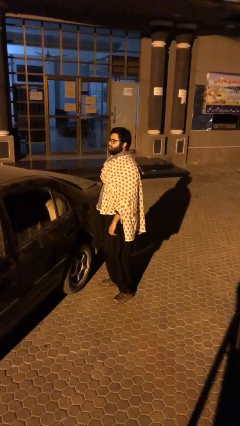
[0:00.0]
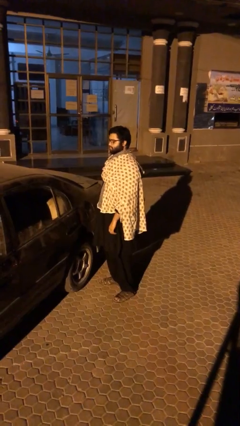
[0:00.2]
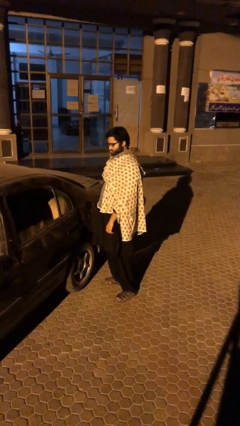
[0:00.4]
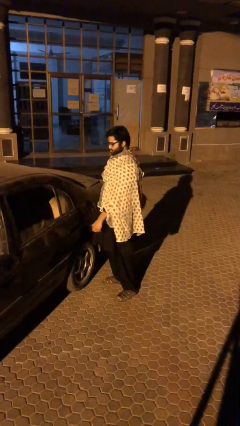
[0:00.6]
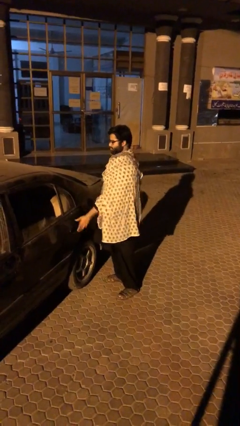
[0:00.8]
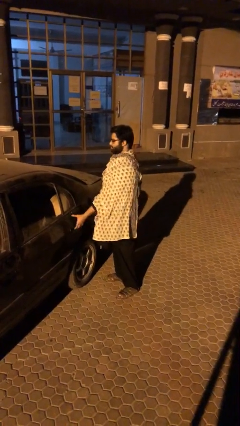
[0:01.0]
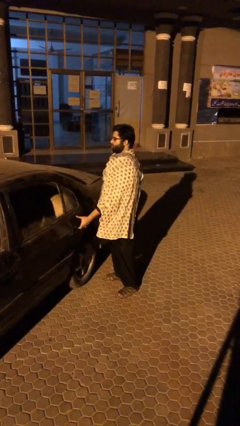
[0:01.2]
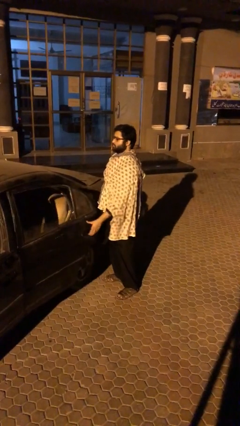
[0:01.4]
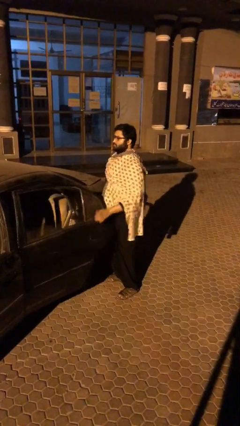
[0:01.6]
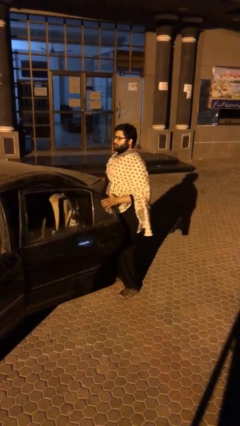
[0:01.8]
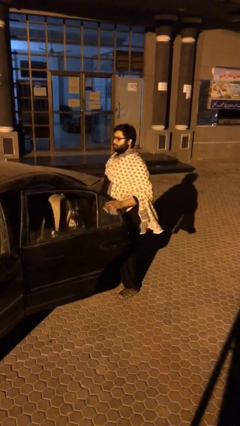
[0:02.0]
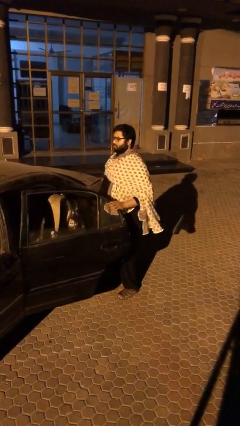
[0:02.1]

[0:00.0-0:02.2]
person opens car door

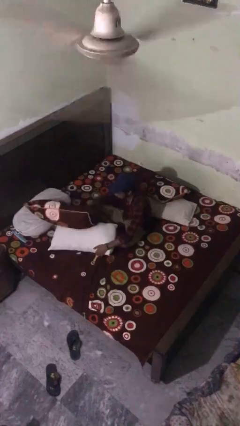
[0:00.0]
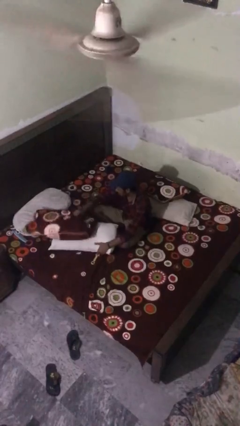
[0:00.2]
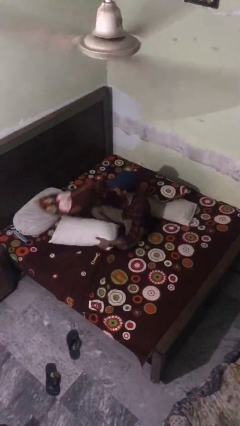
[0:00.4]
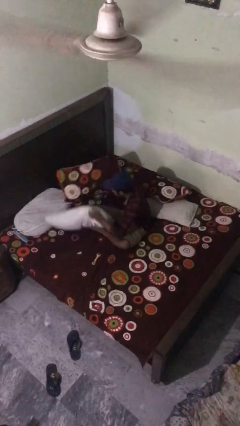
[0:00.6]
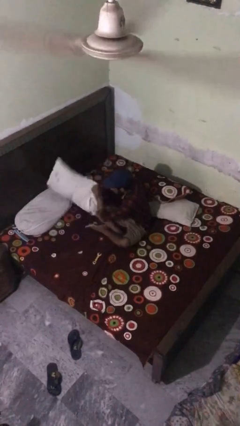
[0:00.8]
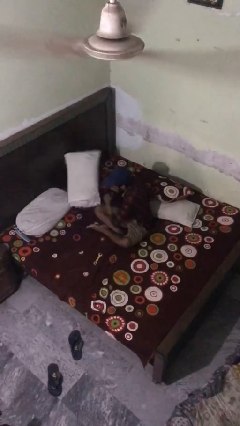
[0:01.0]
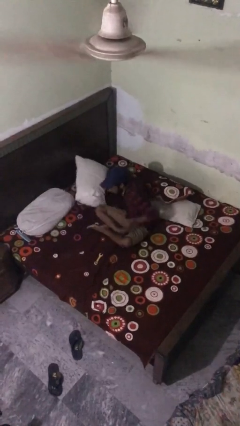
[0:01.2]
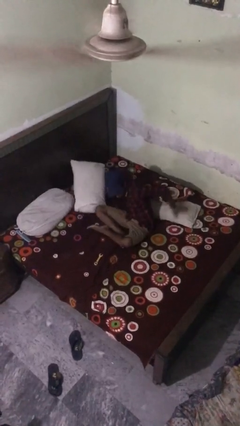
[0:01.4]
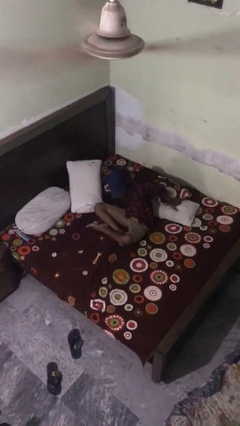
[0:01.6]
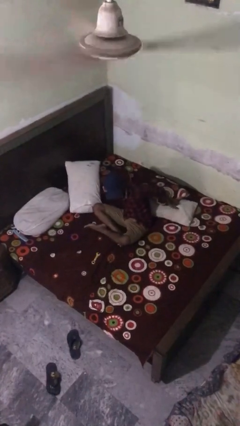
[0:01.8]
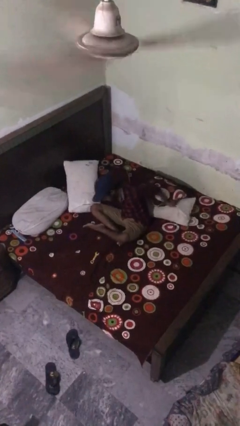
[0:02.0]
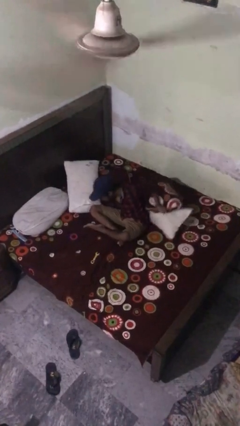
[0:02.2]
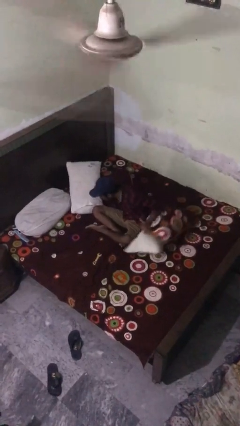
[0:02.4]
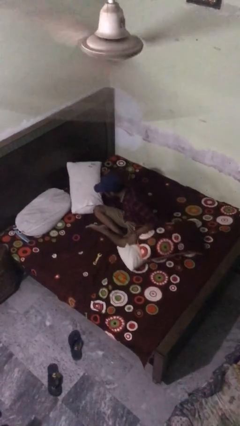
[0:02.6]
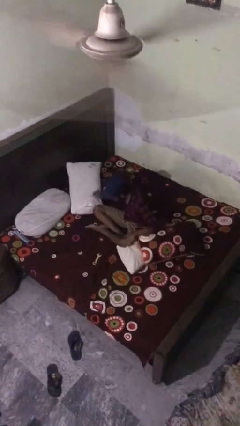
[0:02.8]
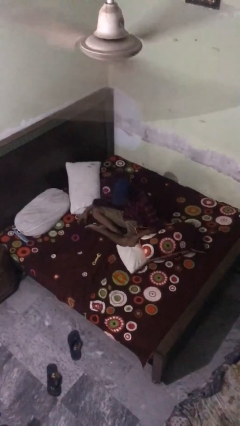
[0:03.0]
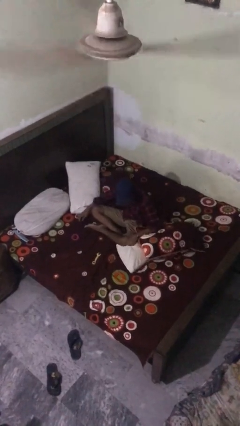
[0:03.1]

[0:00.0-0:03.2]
person searches under bed

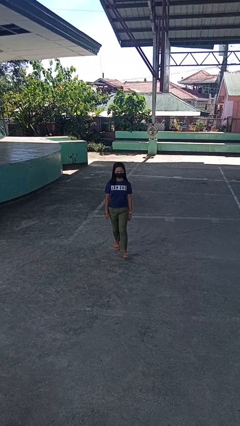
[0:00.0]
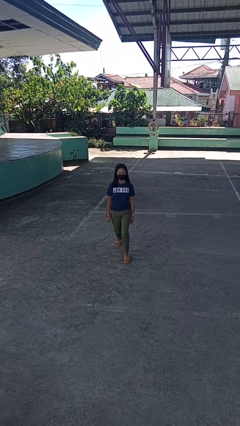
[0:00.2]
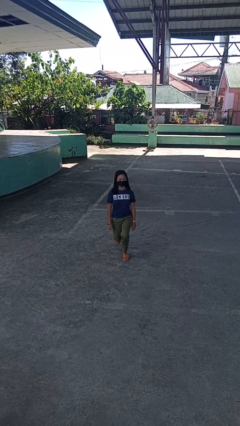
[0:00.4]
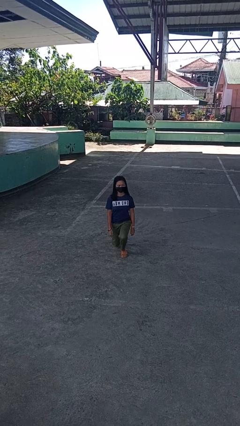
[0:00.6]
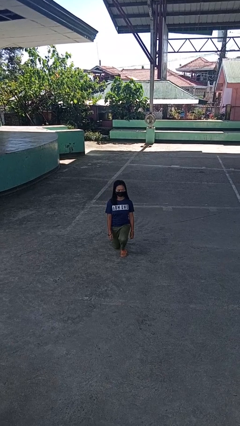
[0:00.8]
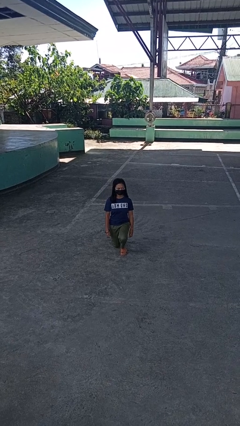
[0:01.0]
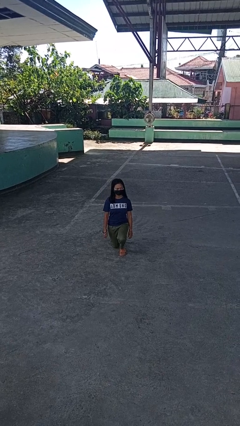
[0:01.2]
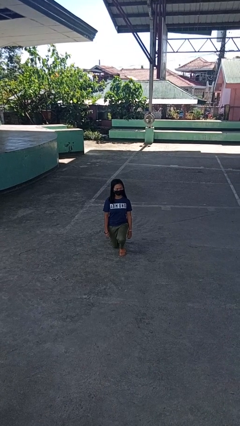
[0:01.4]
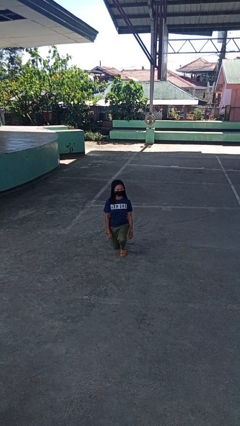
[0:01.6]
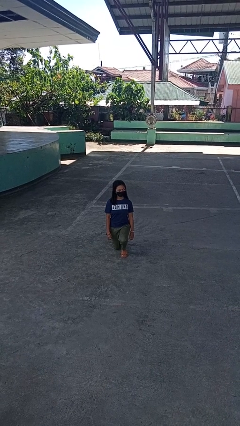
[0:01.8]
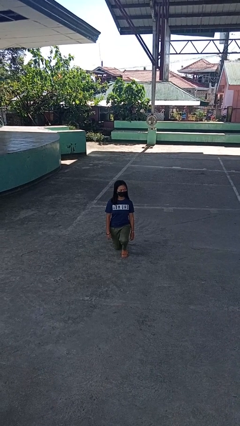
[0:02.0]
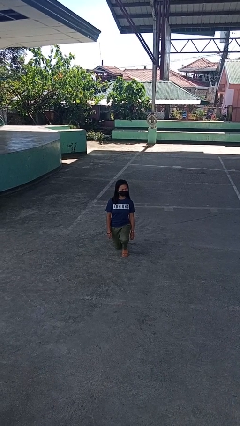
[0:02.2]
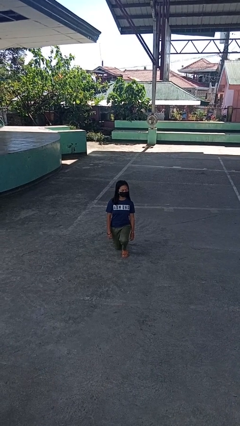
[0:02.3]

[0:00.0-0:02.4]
person kneels

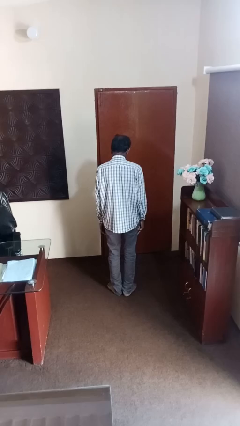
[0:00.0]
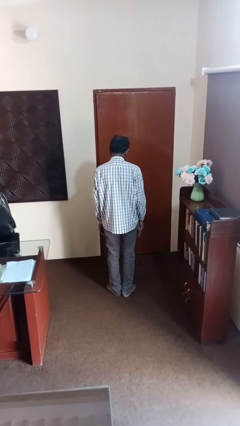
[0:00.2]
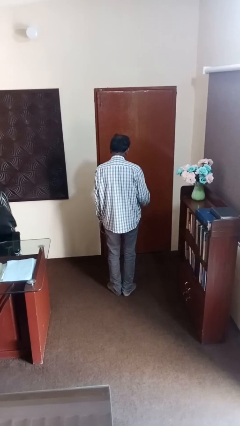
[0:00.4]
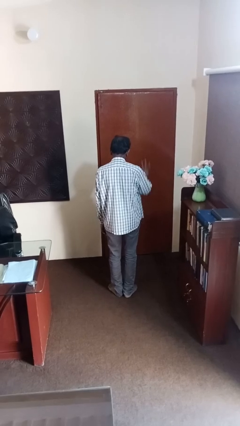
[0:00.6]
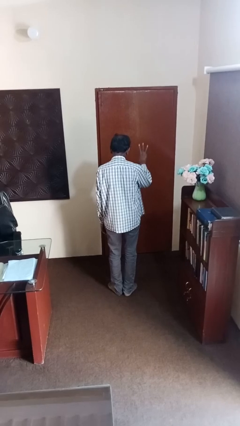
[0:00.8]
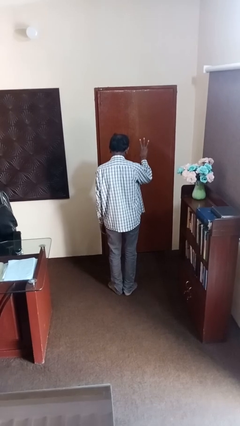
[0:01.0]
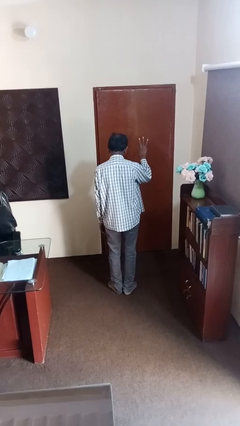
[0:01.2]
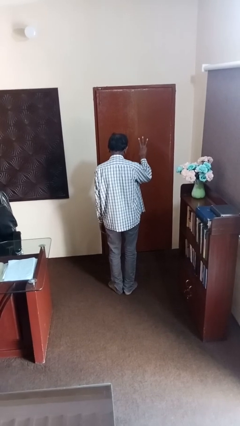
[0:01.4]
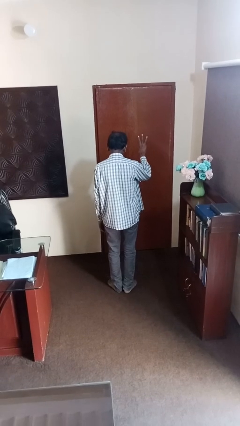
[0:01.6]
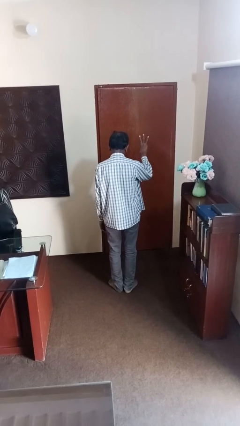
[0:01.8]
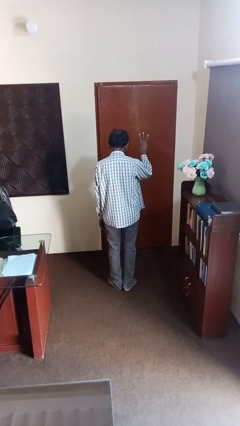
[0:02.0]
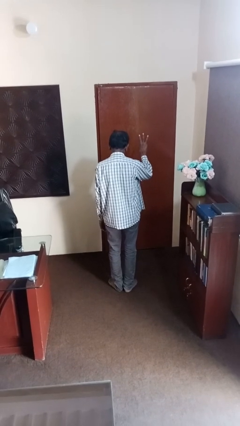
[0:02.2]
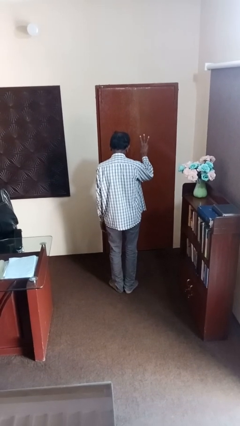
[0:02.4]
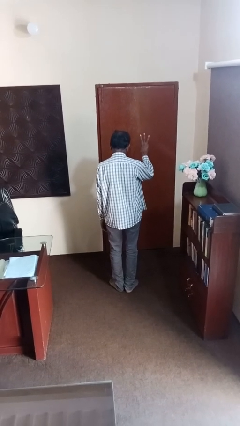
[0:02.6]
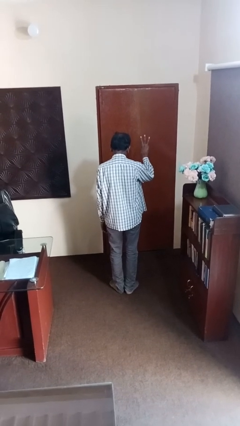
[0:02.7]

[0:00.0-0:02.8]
person gestures number three

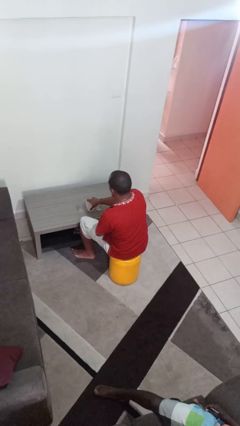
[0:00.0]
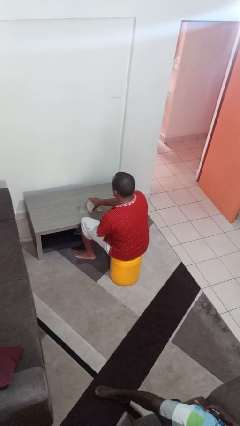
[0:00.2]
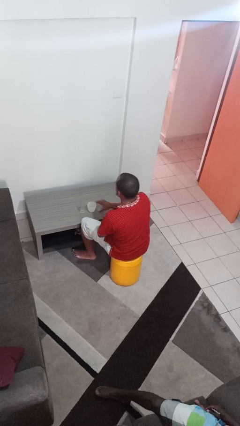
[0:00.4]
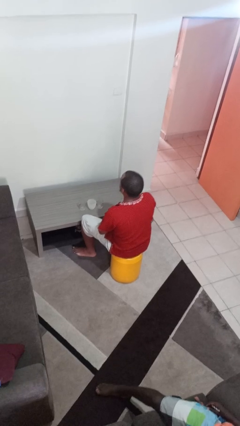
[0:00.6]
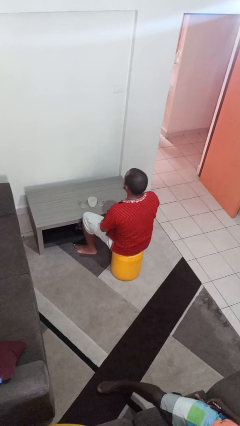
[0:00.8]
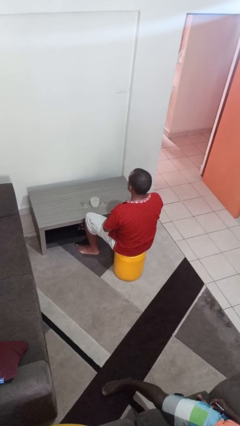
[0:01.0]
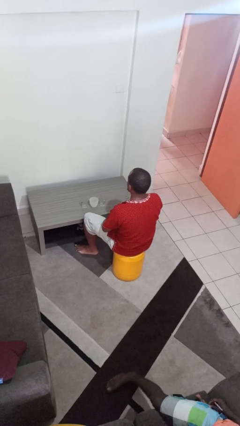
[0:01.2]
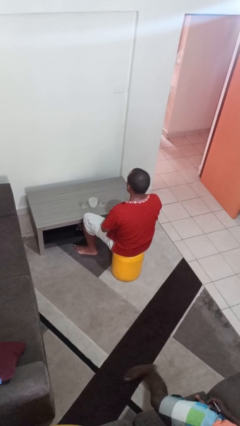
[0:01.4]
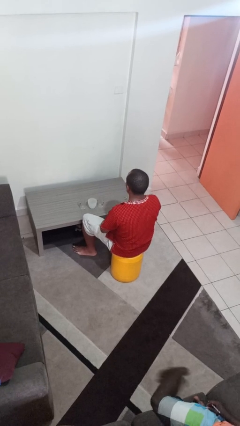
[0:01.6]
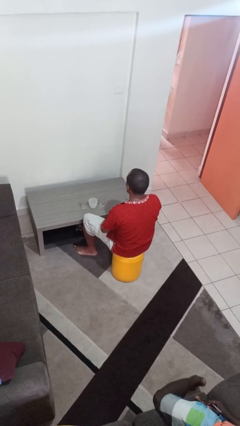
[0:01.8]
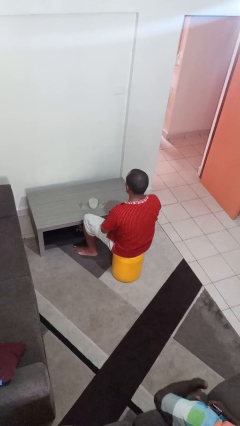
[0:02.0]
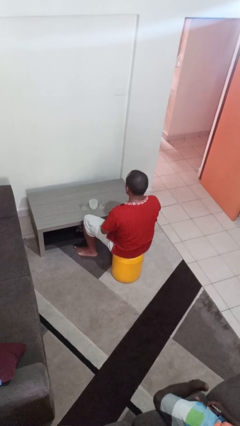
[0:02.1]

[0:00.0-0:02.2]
person puts down object on table

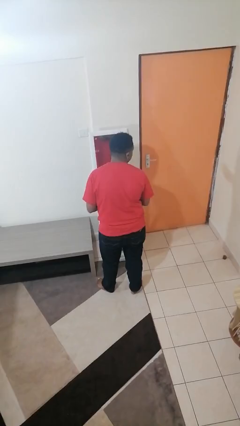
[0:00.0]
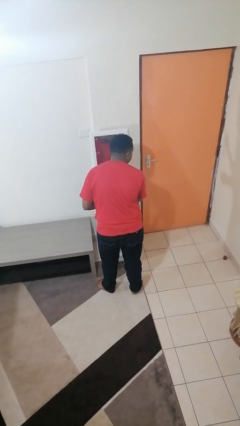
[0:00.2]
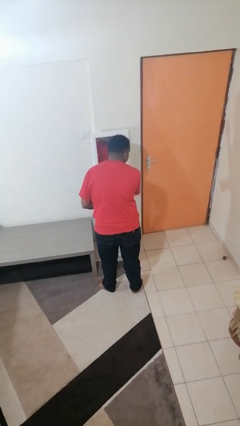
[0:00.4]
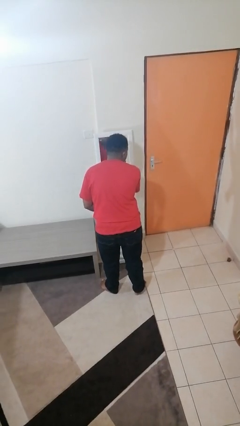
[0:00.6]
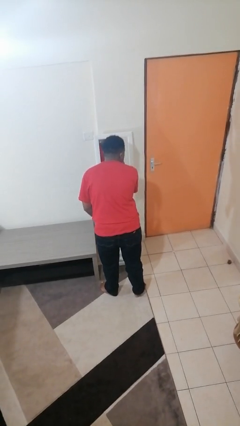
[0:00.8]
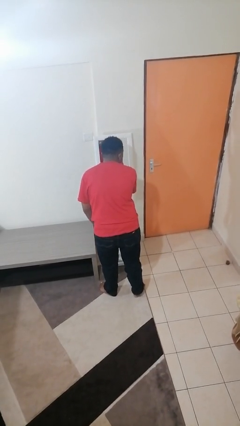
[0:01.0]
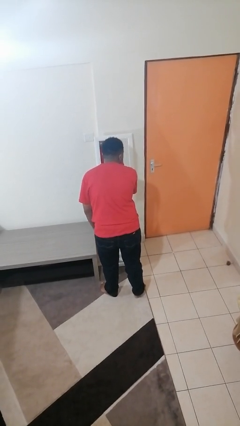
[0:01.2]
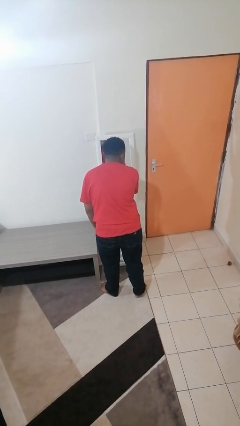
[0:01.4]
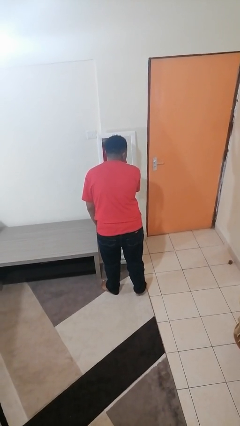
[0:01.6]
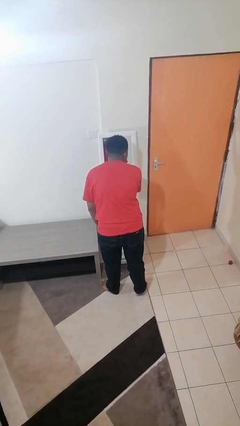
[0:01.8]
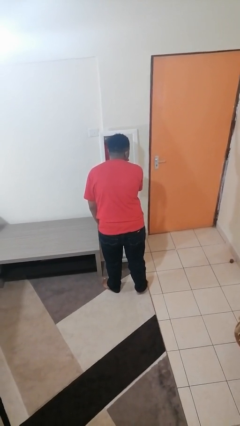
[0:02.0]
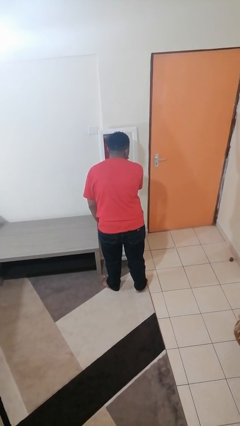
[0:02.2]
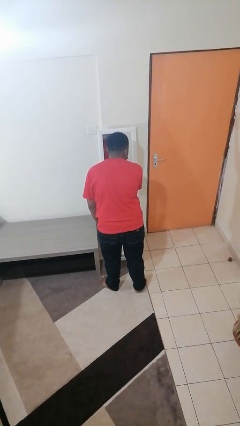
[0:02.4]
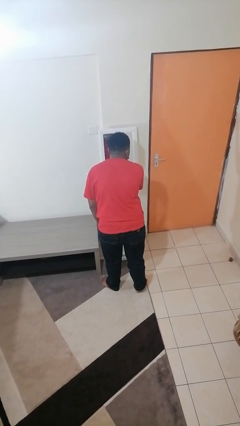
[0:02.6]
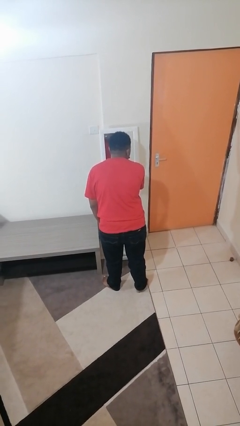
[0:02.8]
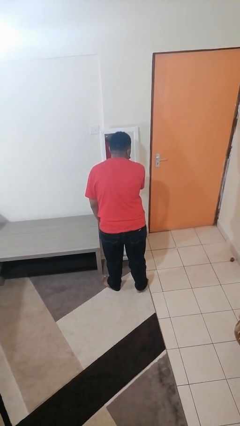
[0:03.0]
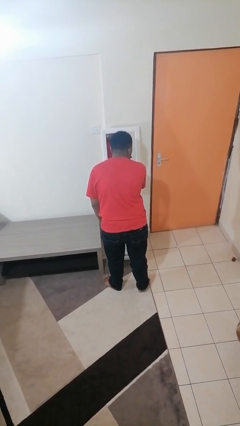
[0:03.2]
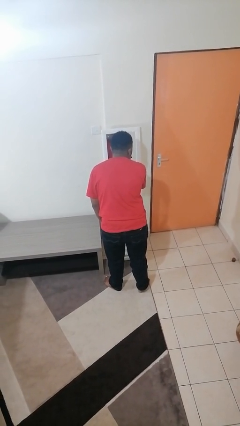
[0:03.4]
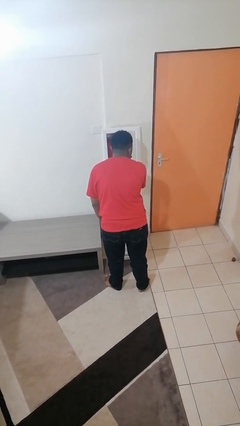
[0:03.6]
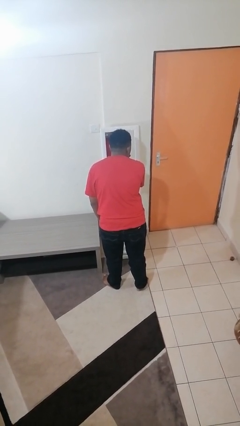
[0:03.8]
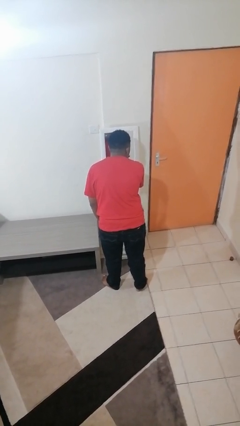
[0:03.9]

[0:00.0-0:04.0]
person applies eye makeup

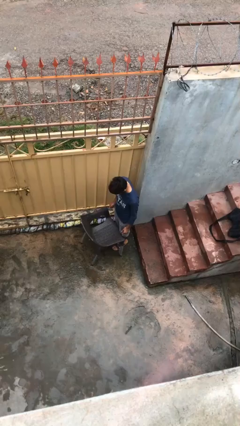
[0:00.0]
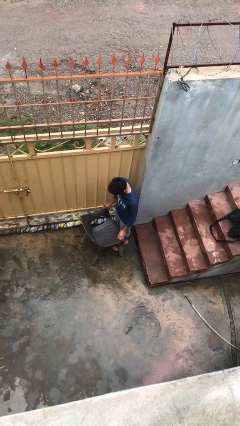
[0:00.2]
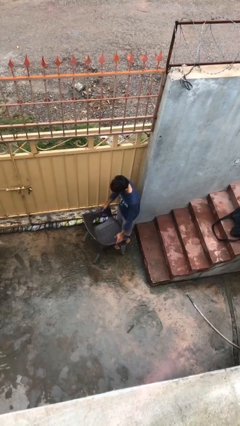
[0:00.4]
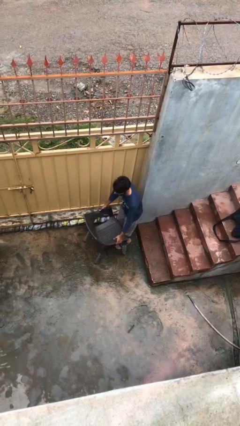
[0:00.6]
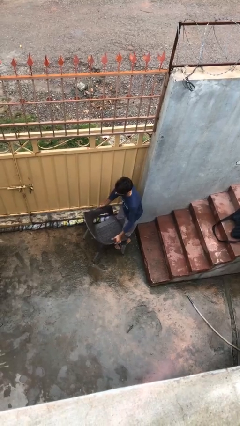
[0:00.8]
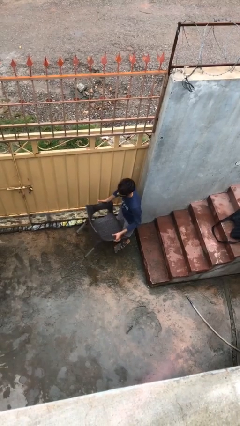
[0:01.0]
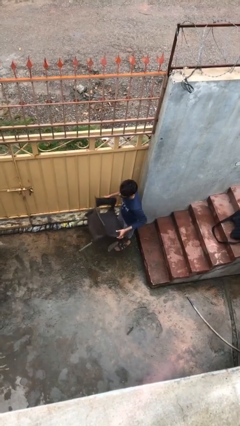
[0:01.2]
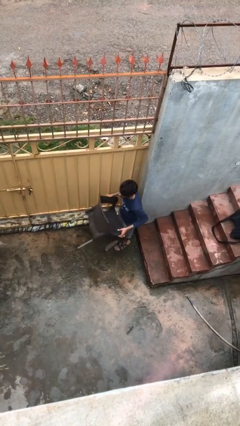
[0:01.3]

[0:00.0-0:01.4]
person picks up object from floor
